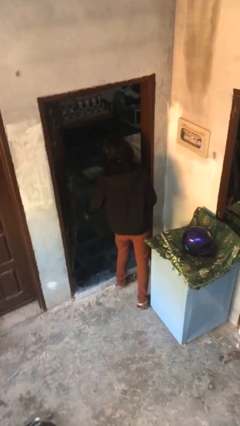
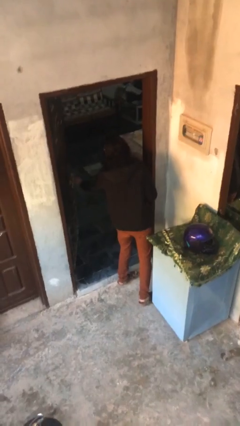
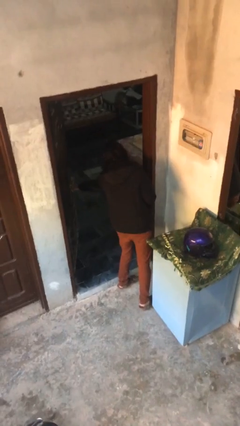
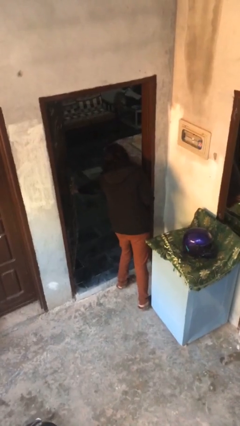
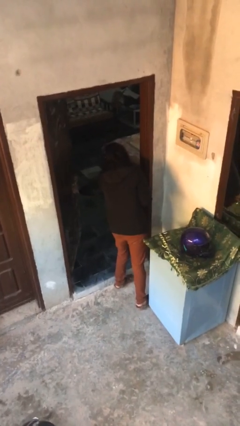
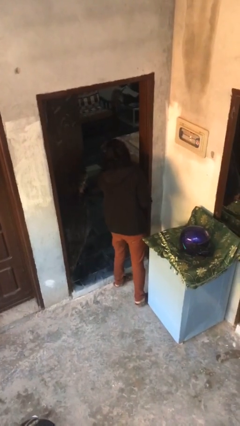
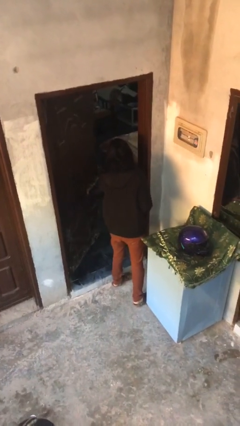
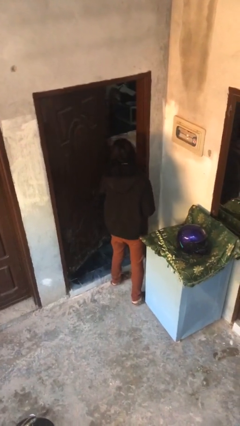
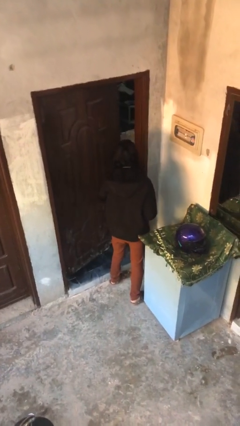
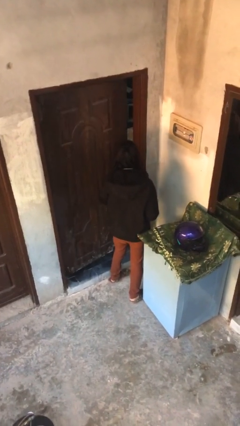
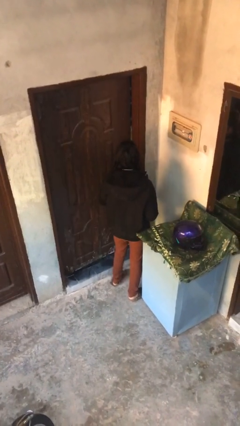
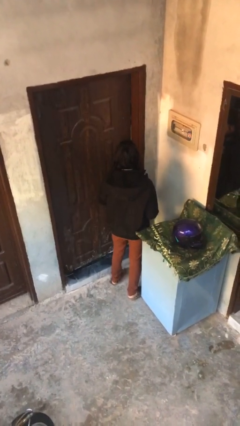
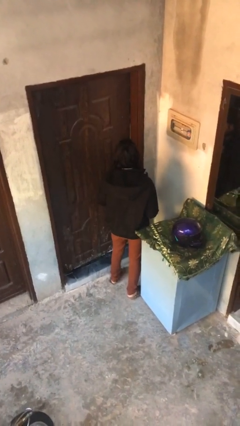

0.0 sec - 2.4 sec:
person closes facility door

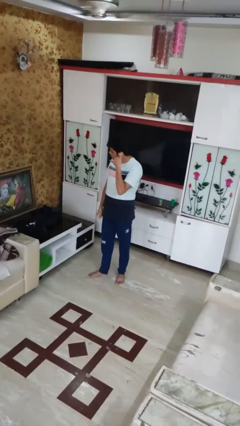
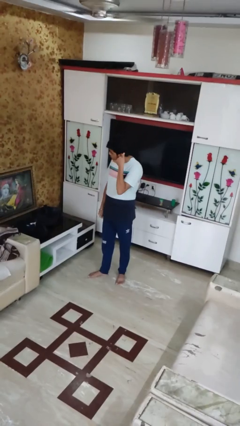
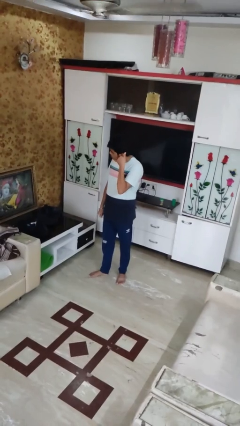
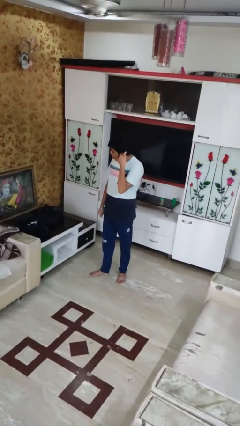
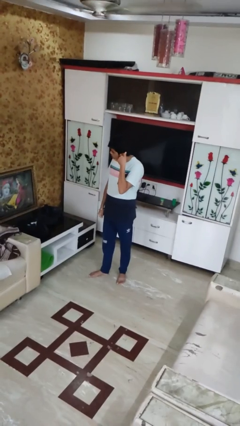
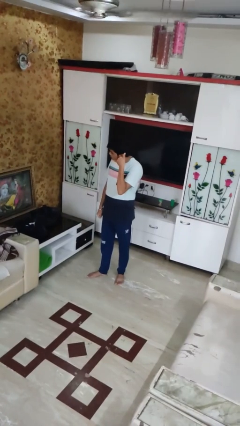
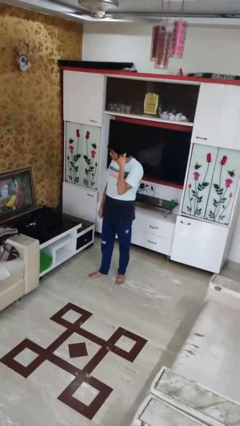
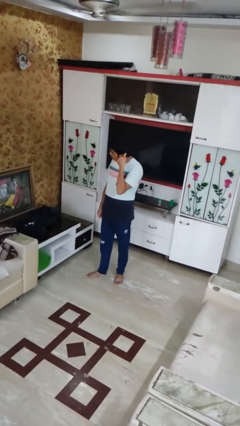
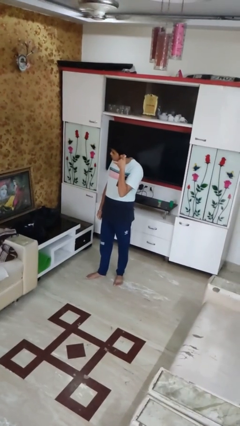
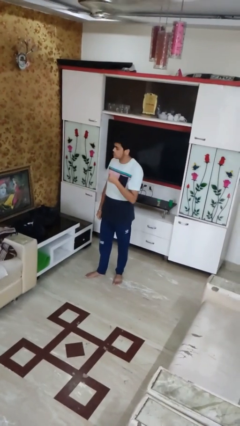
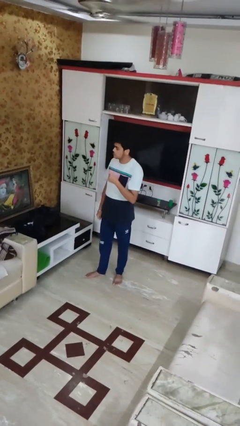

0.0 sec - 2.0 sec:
person gestures call me

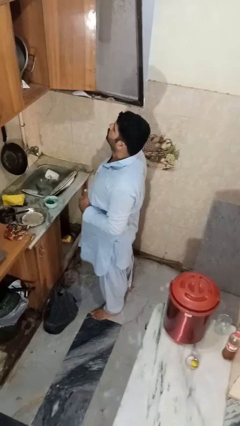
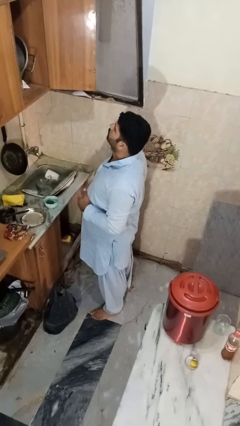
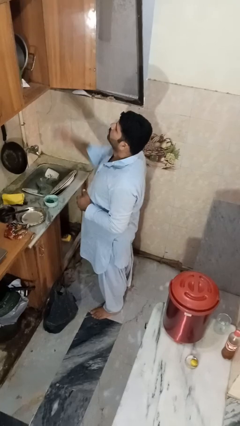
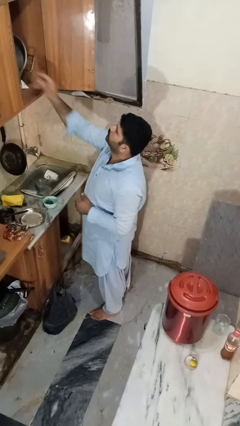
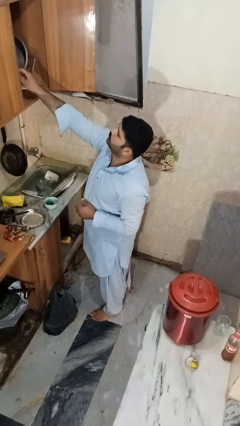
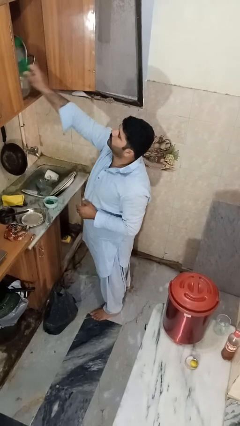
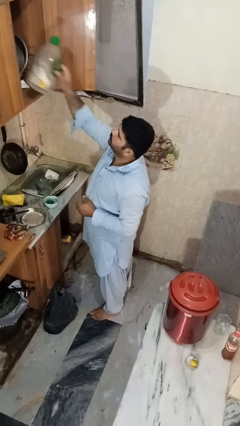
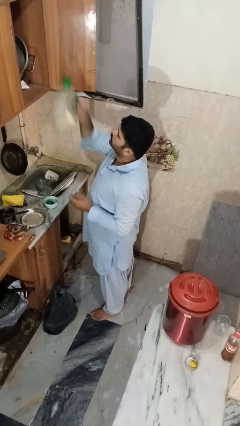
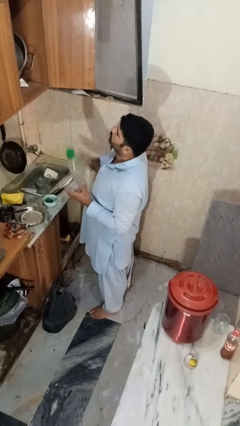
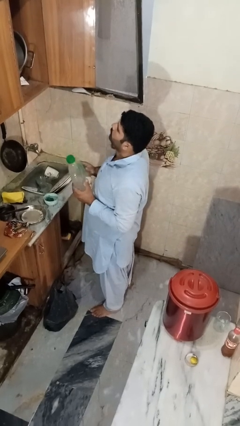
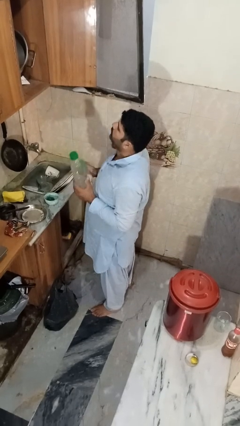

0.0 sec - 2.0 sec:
person takes object from cabinet

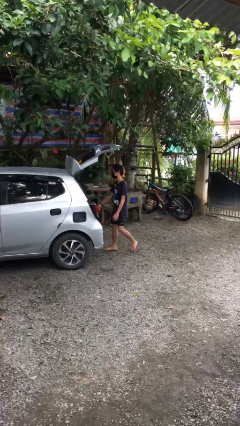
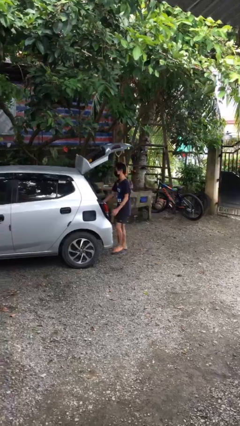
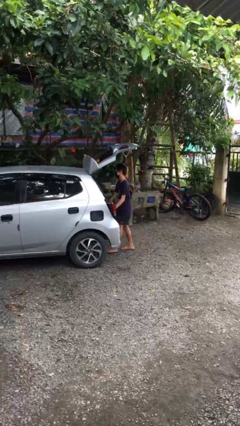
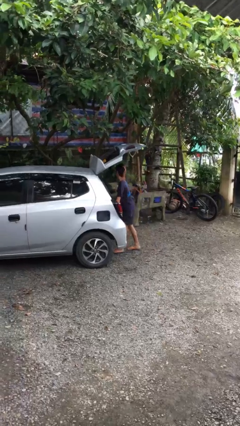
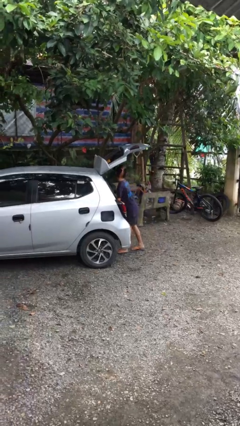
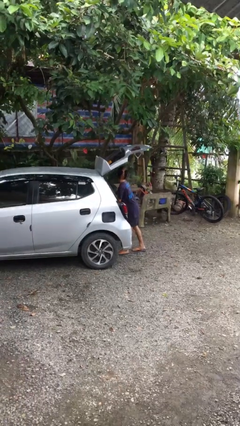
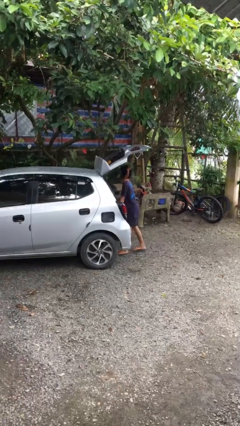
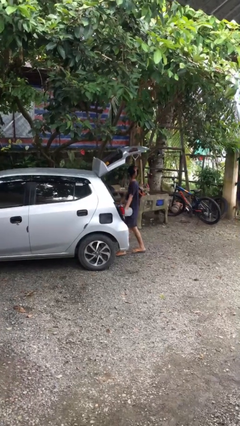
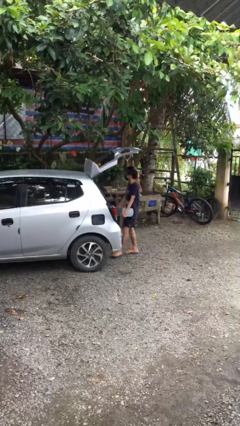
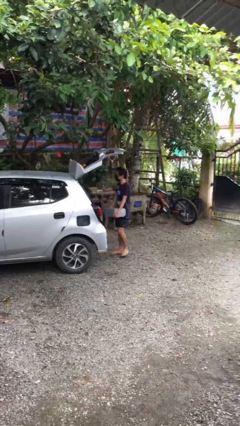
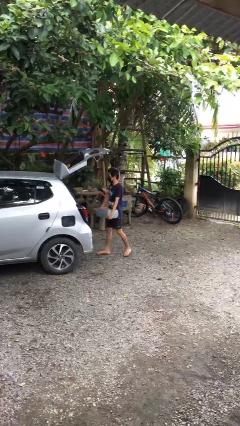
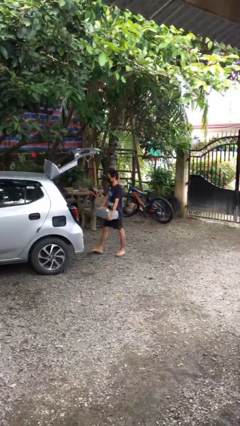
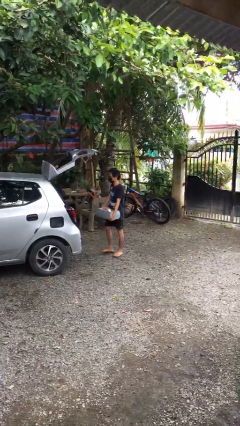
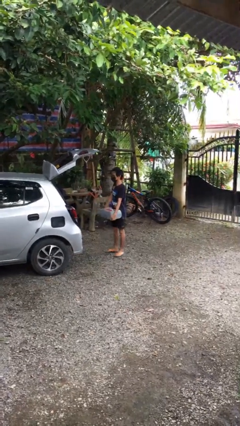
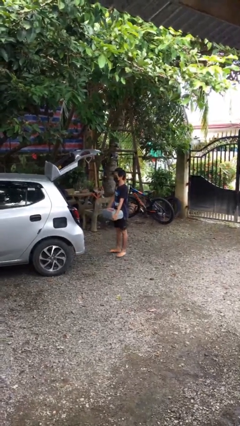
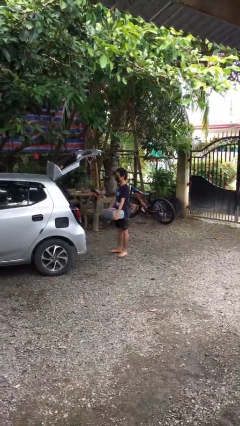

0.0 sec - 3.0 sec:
person unloads car

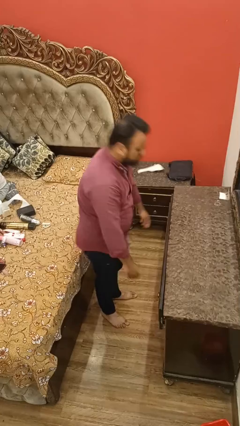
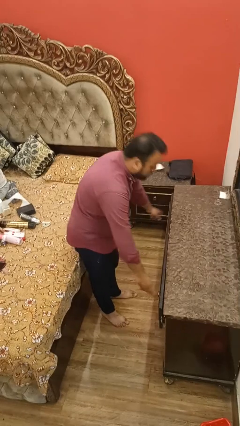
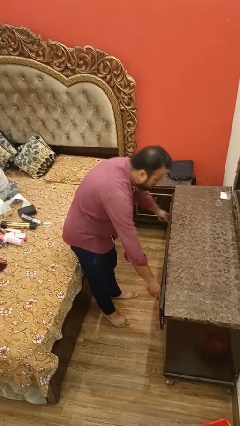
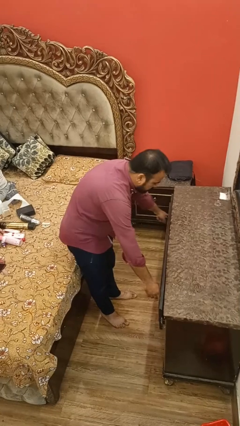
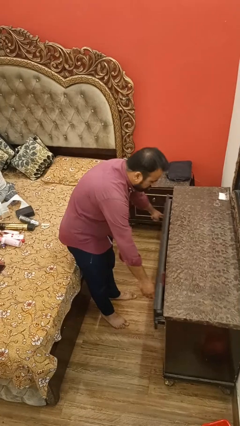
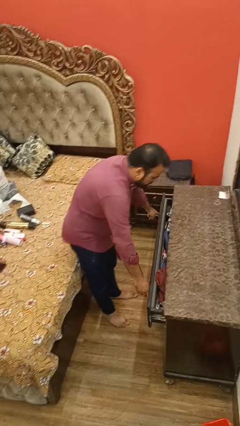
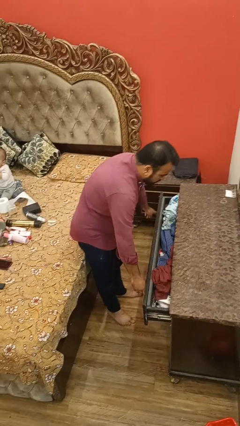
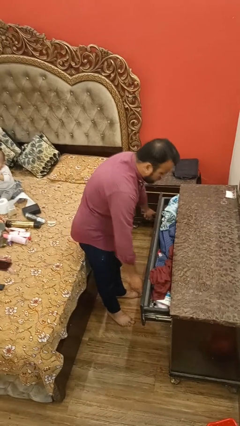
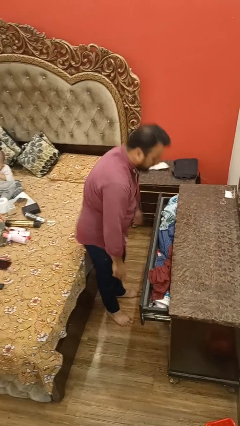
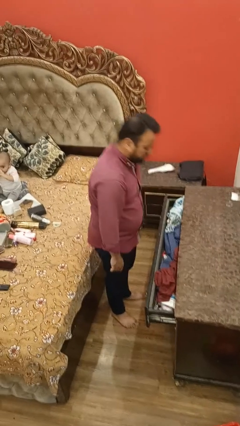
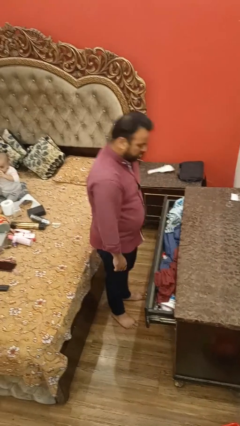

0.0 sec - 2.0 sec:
person opens dresser drawer

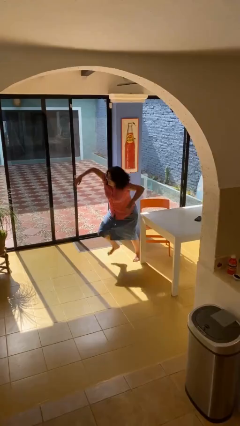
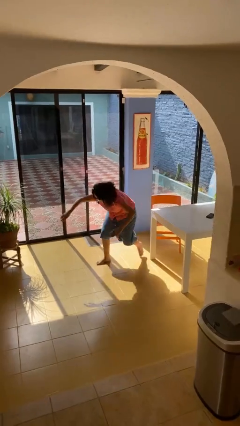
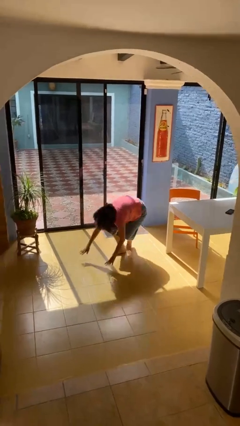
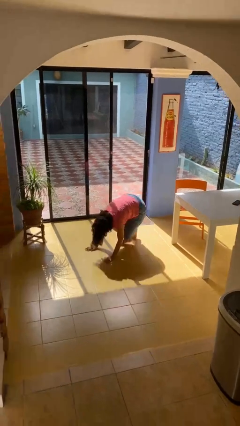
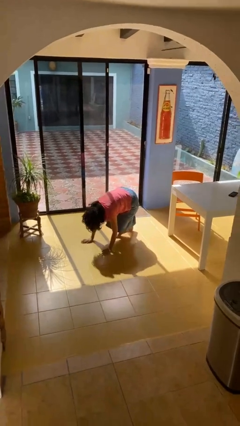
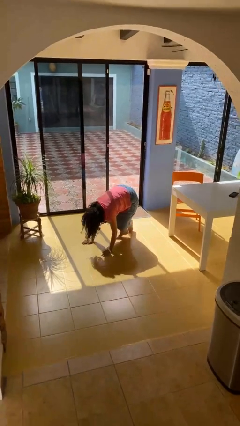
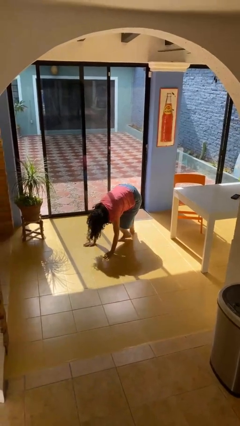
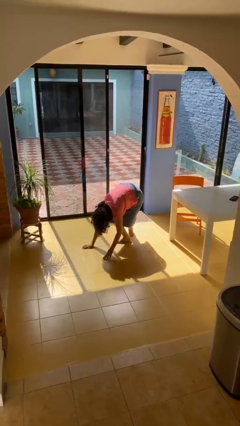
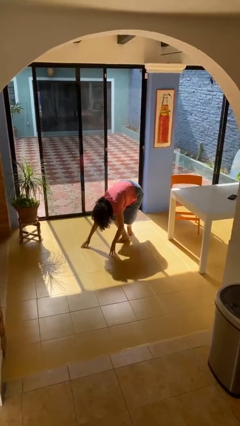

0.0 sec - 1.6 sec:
person falls from chair

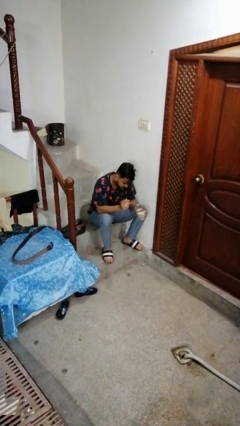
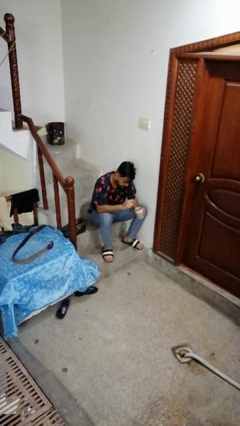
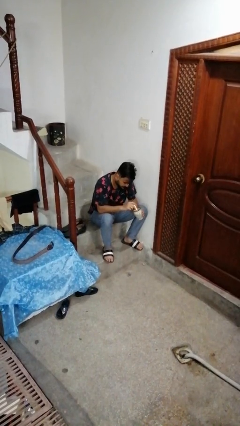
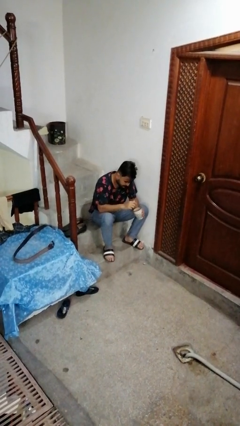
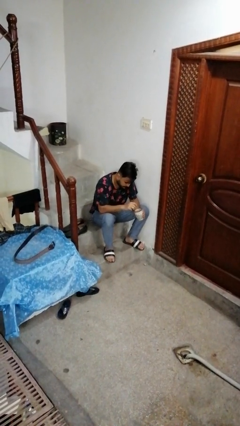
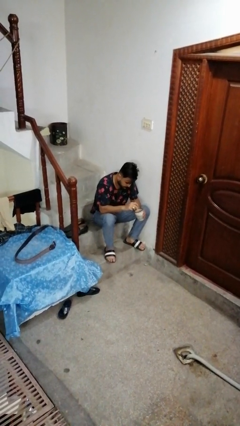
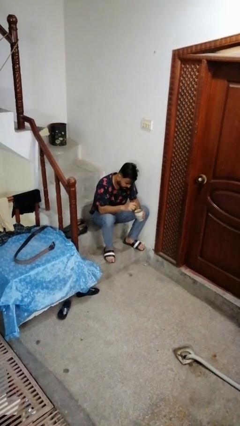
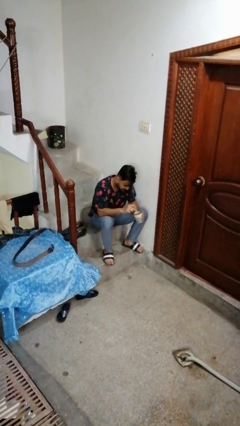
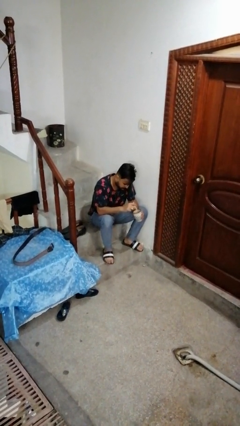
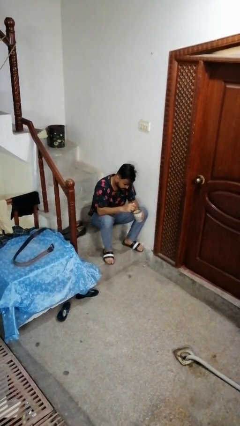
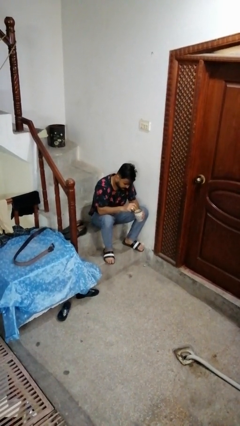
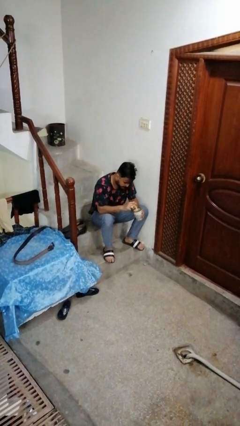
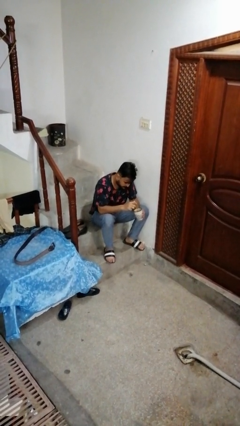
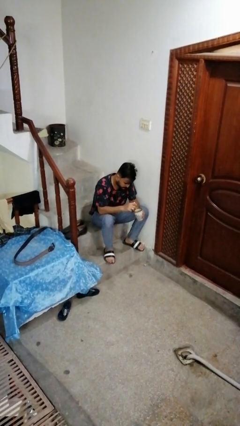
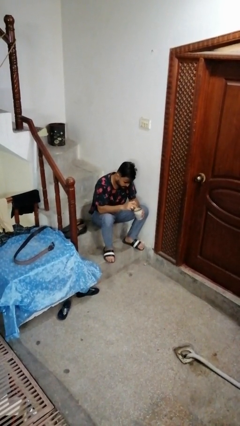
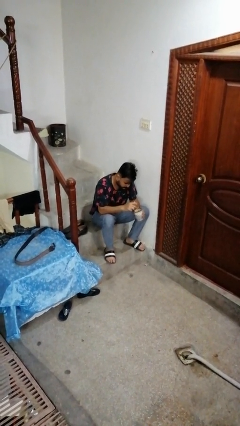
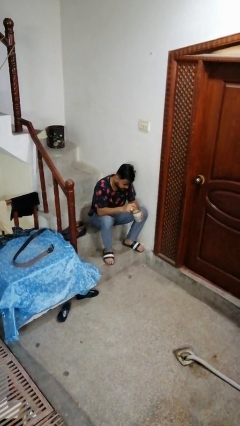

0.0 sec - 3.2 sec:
person stirs mug

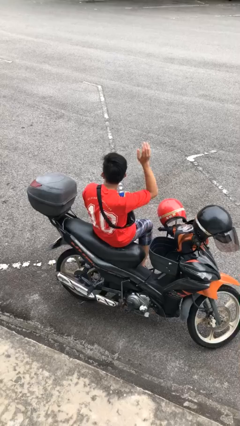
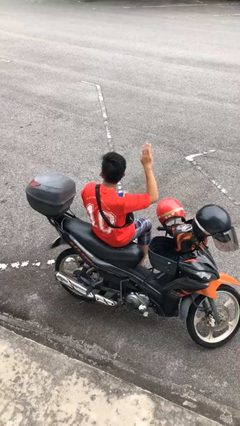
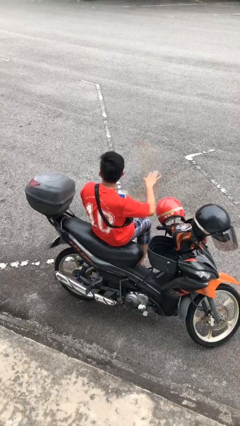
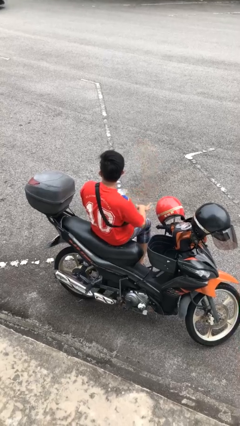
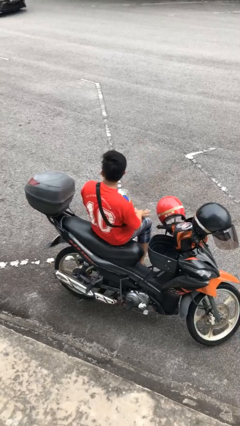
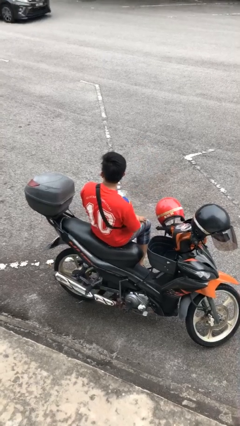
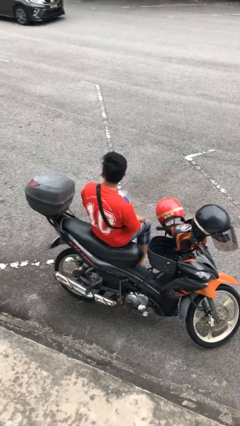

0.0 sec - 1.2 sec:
person gestures swipe down
